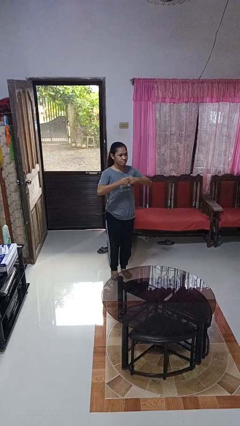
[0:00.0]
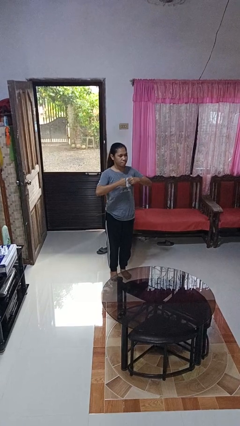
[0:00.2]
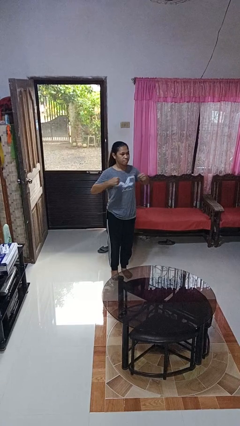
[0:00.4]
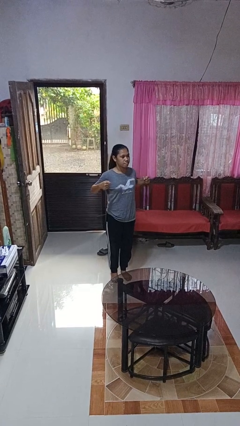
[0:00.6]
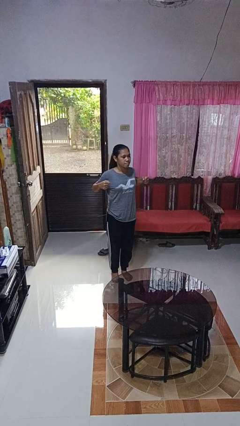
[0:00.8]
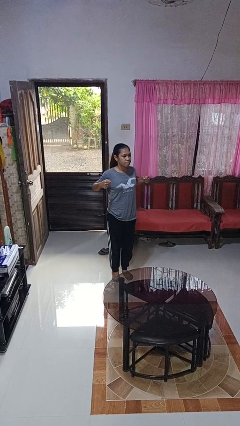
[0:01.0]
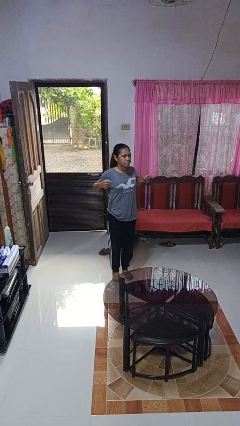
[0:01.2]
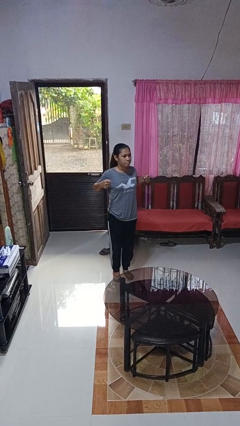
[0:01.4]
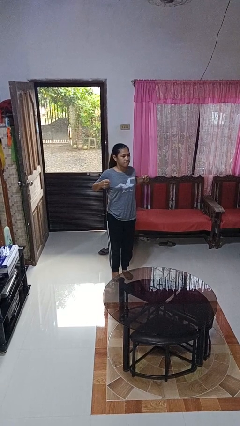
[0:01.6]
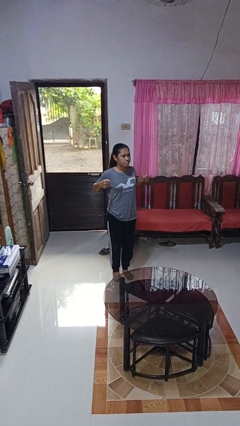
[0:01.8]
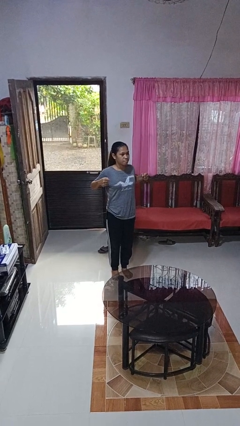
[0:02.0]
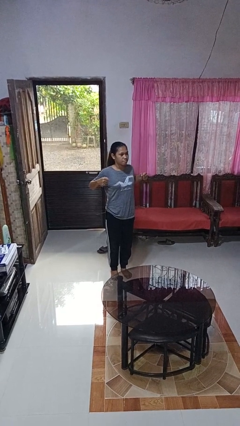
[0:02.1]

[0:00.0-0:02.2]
person gestures zoom in

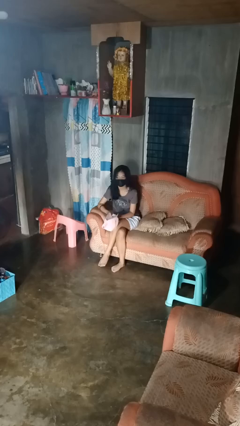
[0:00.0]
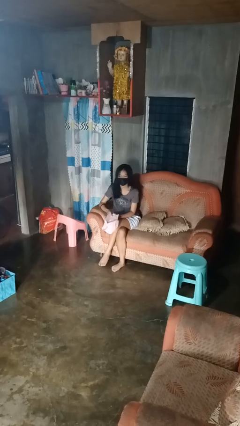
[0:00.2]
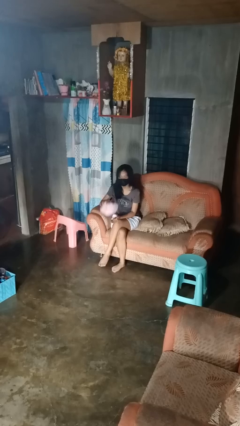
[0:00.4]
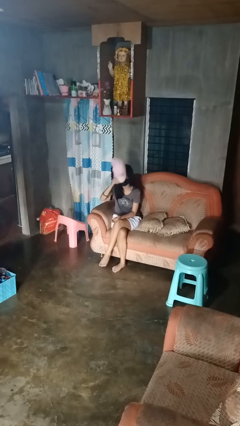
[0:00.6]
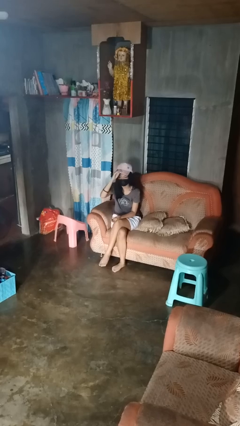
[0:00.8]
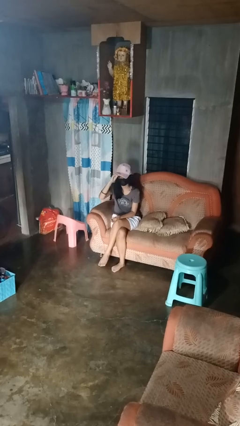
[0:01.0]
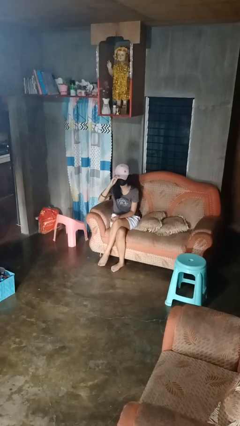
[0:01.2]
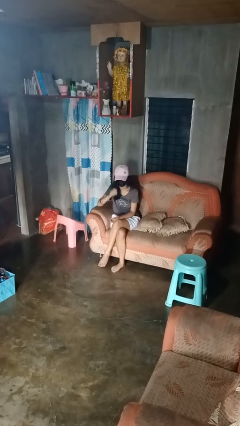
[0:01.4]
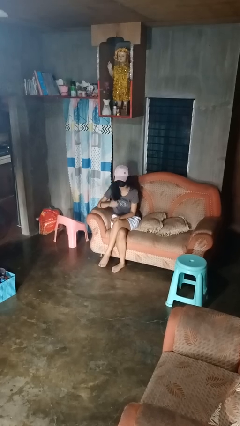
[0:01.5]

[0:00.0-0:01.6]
person puts on hat

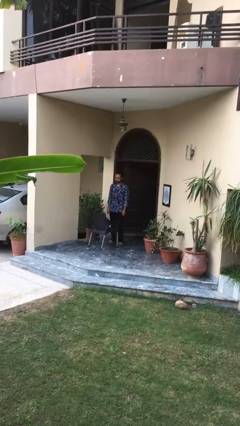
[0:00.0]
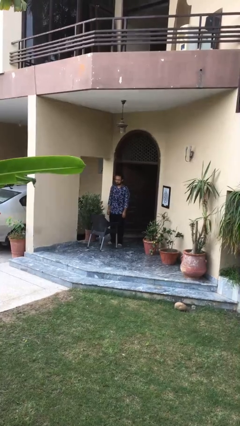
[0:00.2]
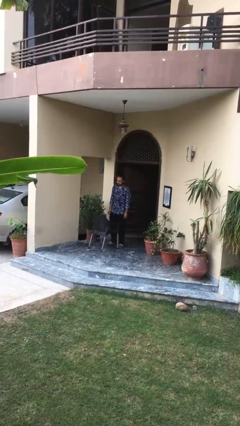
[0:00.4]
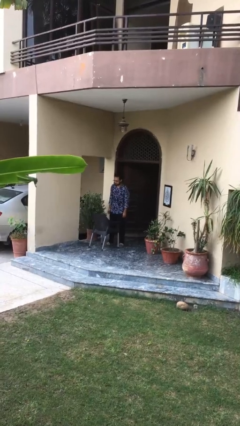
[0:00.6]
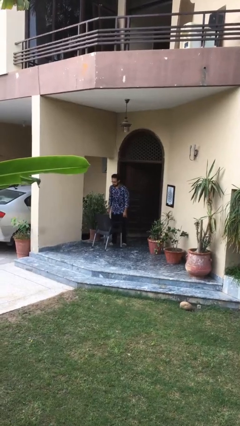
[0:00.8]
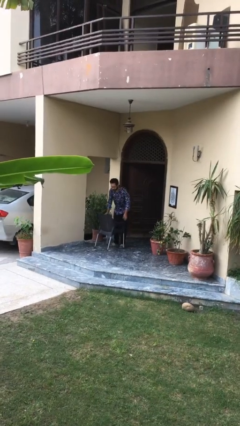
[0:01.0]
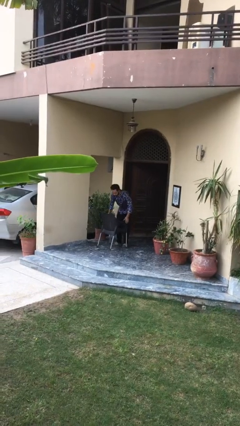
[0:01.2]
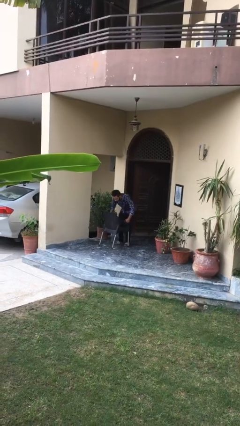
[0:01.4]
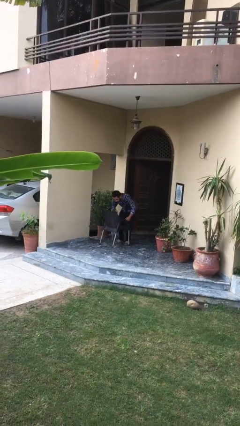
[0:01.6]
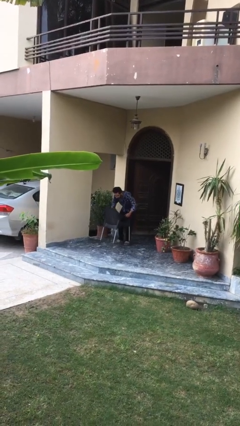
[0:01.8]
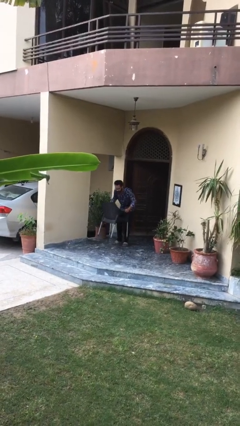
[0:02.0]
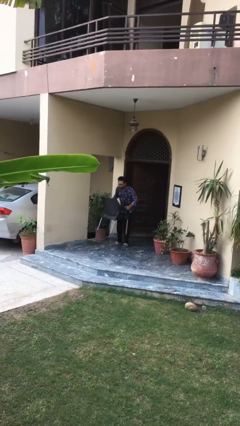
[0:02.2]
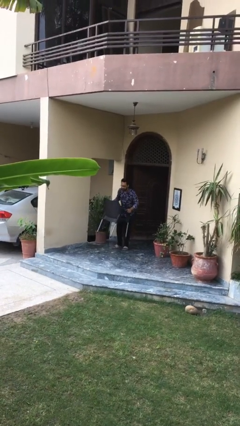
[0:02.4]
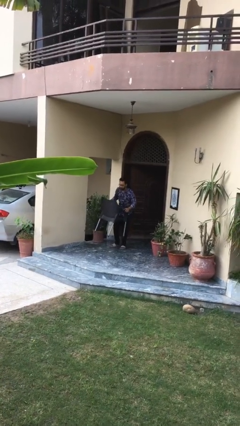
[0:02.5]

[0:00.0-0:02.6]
person picks up object from floor

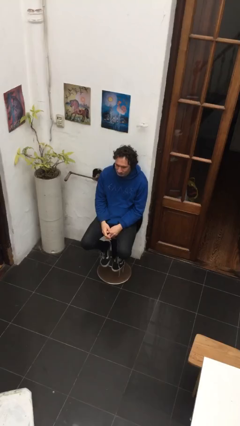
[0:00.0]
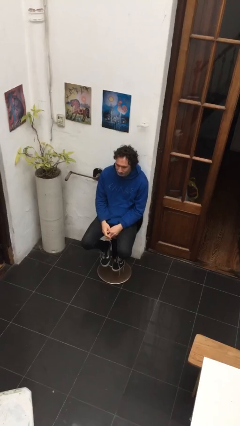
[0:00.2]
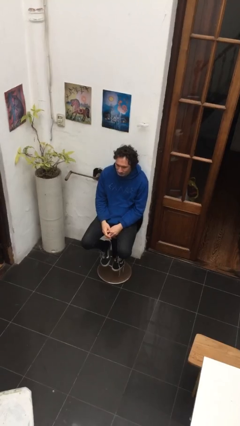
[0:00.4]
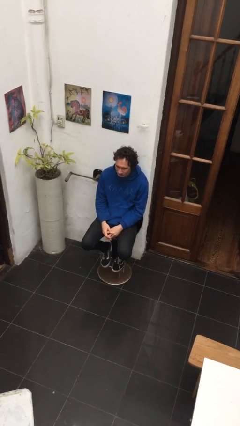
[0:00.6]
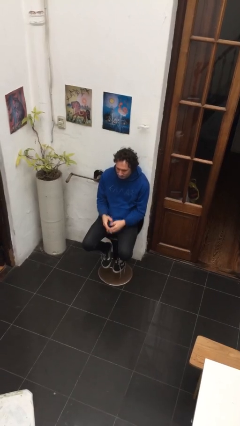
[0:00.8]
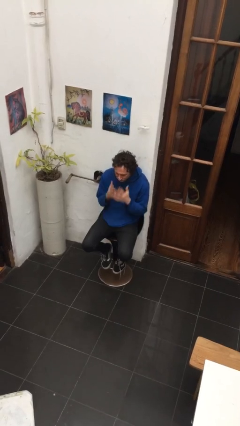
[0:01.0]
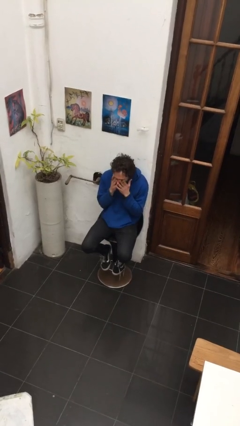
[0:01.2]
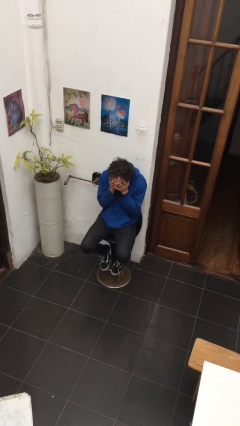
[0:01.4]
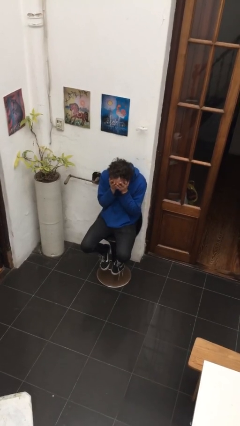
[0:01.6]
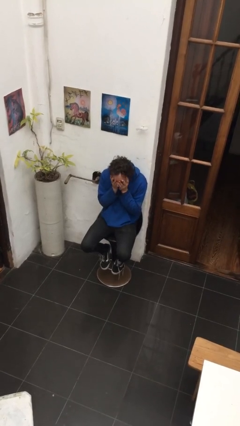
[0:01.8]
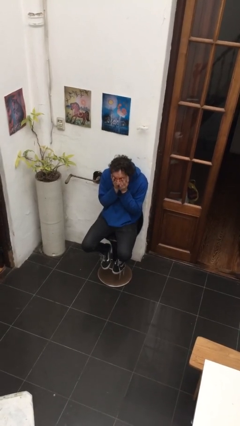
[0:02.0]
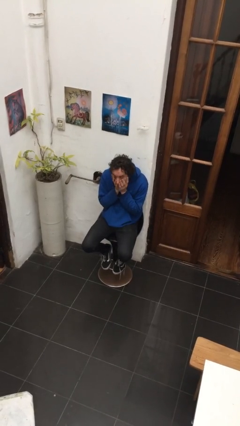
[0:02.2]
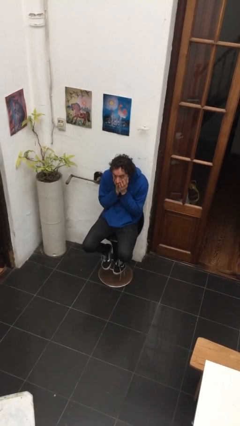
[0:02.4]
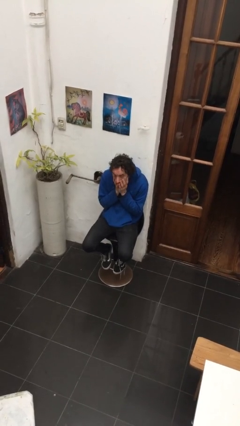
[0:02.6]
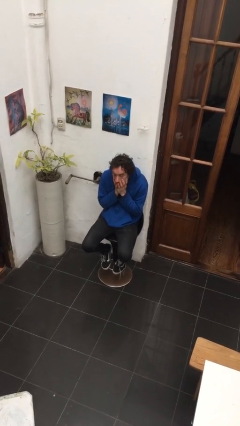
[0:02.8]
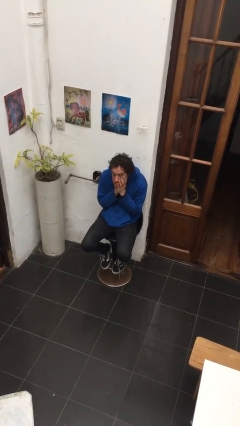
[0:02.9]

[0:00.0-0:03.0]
person covers face with hands

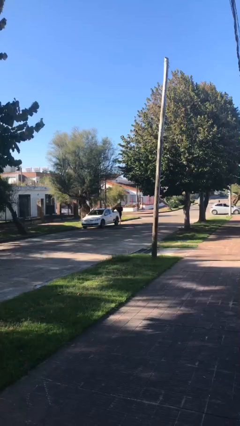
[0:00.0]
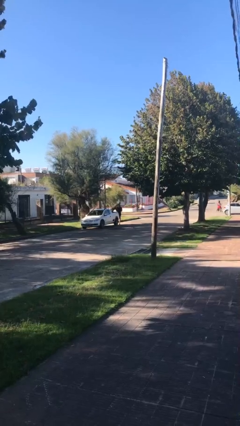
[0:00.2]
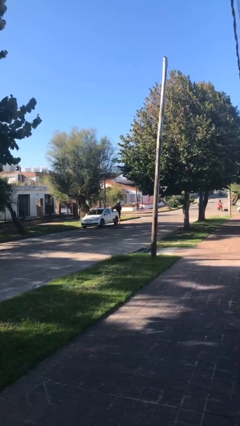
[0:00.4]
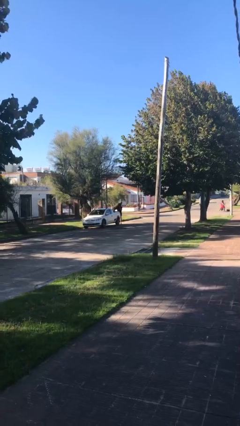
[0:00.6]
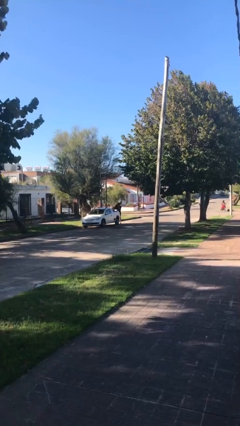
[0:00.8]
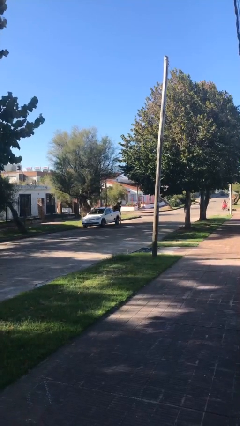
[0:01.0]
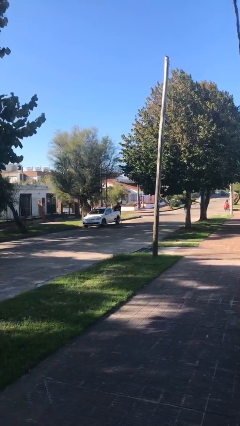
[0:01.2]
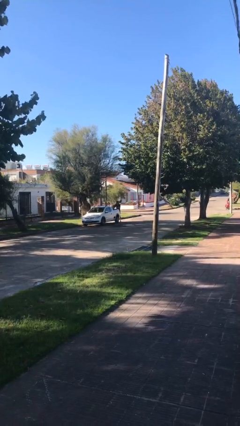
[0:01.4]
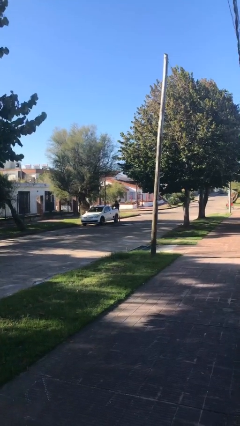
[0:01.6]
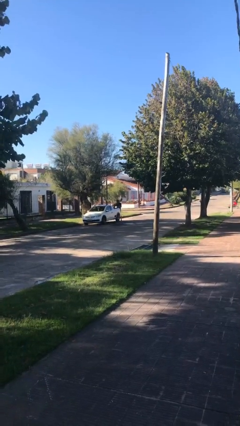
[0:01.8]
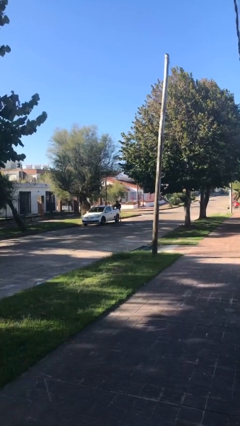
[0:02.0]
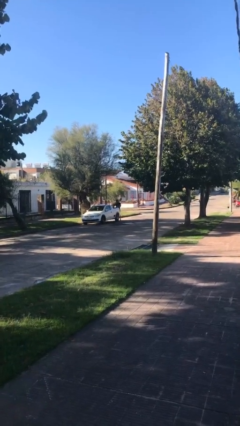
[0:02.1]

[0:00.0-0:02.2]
person loads car

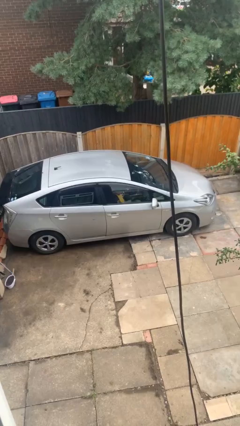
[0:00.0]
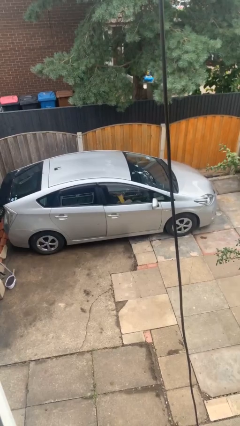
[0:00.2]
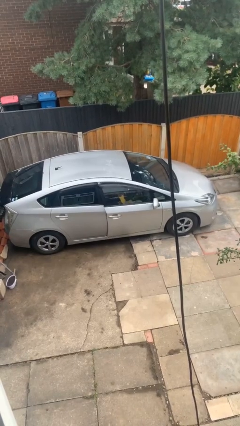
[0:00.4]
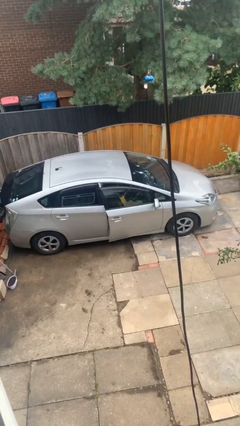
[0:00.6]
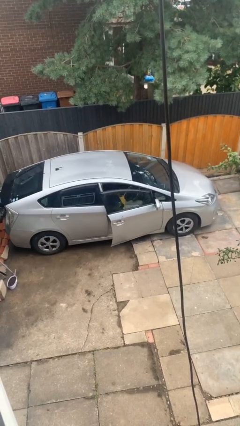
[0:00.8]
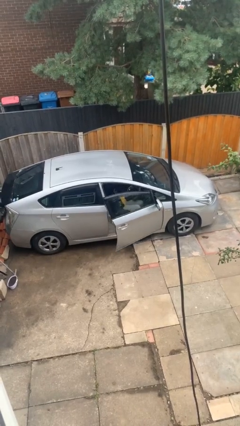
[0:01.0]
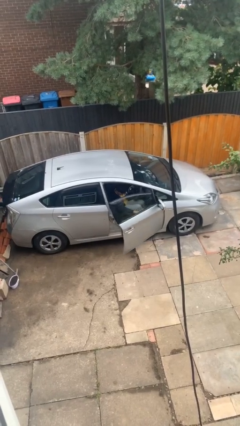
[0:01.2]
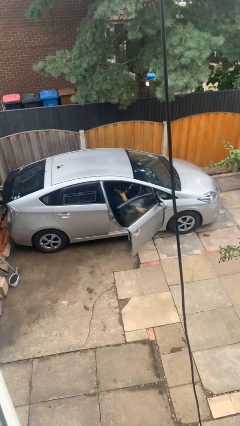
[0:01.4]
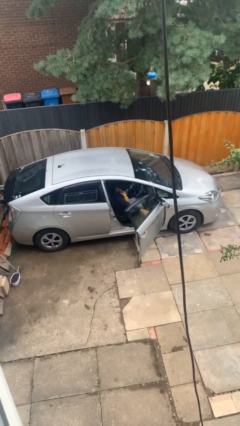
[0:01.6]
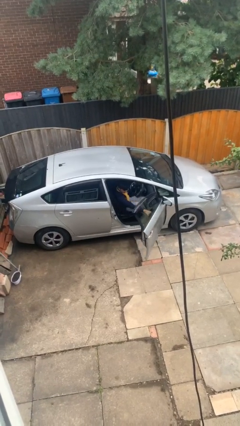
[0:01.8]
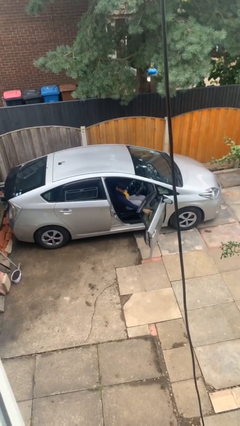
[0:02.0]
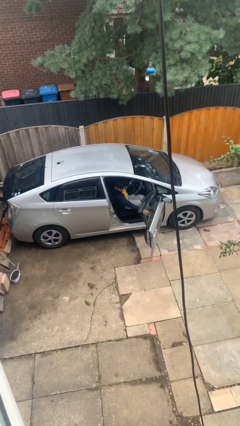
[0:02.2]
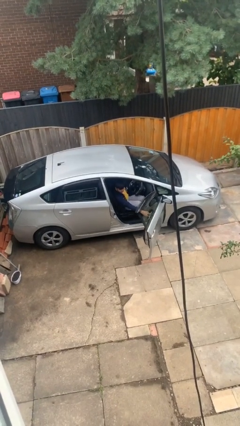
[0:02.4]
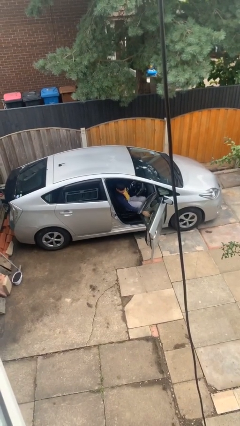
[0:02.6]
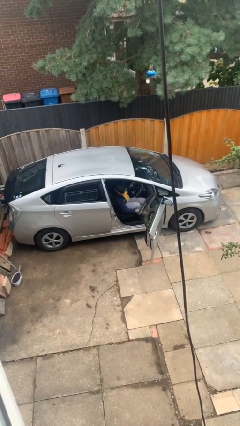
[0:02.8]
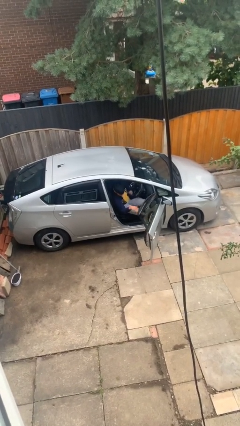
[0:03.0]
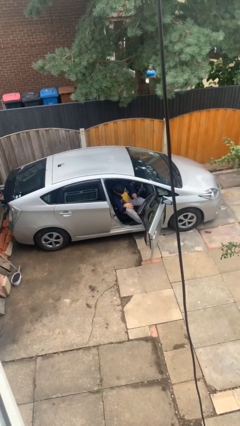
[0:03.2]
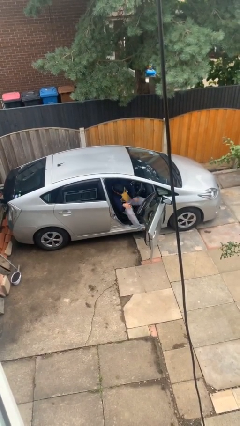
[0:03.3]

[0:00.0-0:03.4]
person opens car door

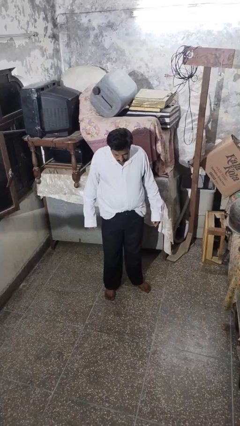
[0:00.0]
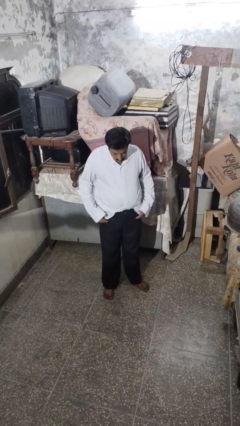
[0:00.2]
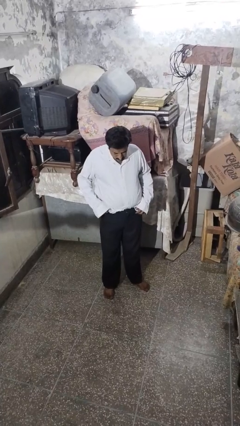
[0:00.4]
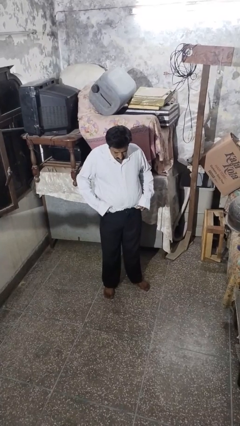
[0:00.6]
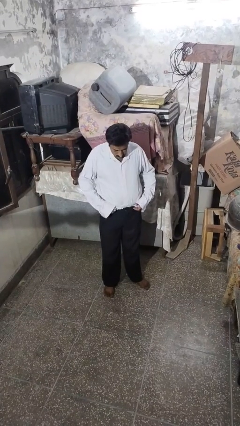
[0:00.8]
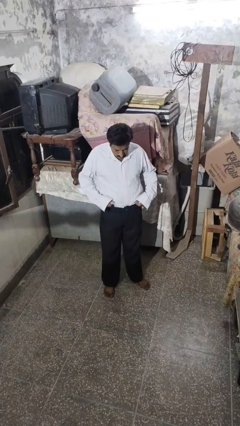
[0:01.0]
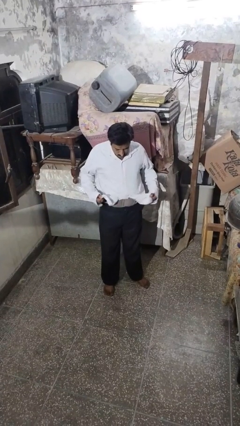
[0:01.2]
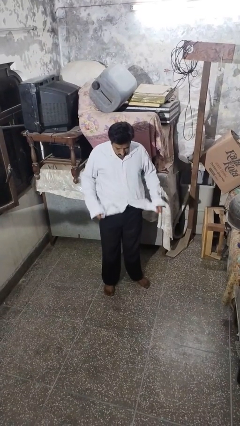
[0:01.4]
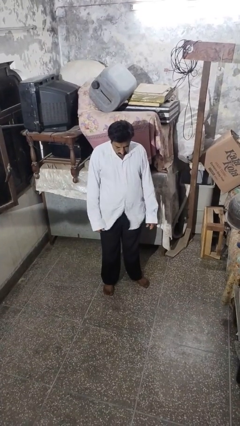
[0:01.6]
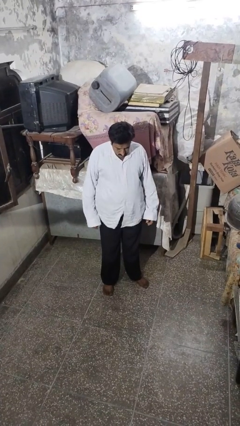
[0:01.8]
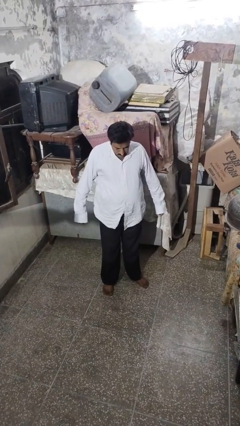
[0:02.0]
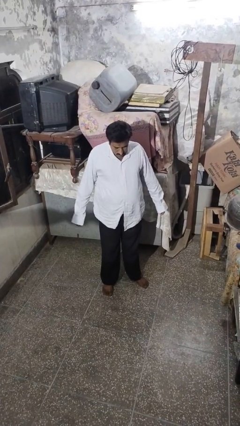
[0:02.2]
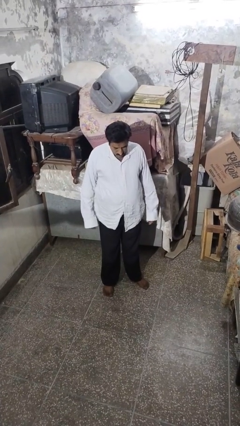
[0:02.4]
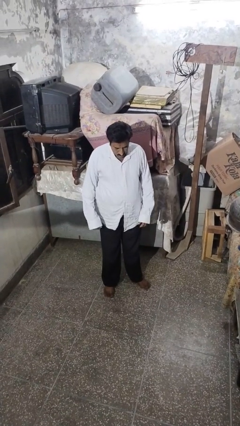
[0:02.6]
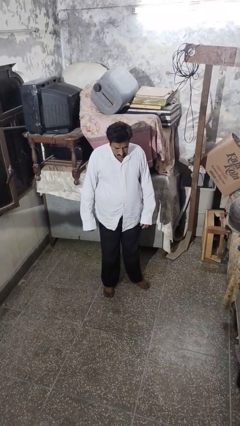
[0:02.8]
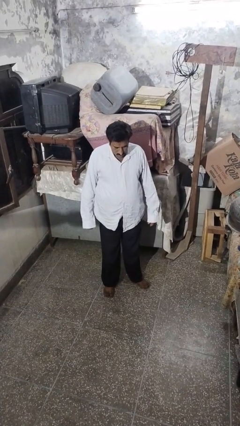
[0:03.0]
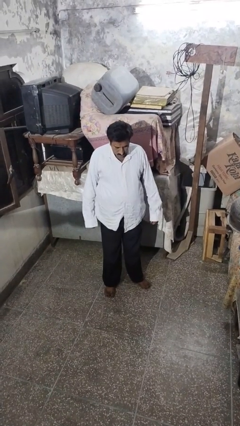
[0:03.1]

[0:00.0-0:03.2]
person untucks shirt
